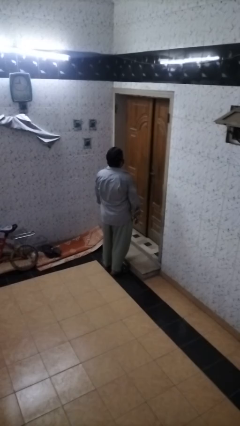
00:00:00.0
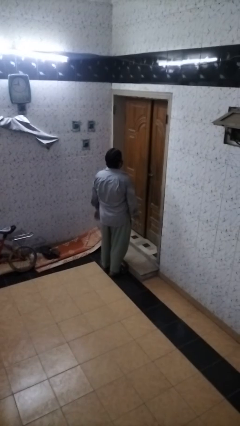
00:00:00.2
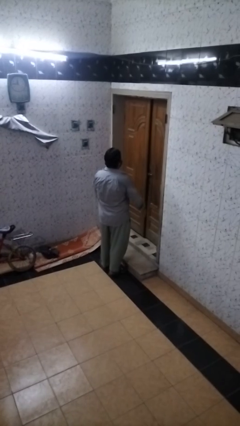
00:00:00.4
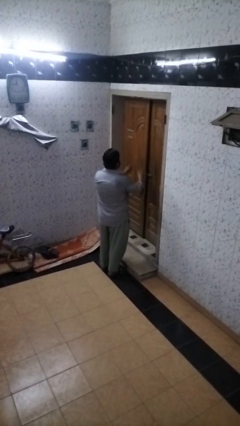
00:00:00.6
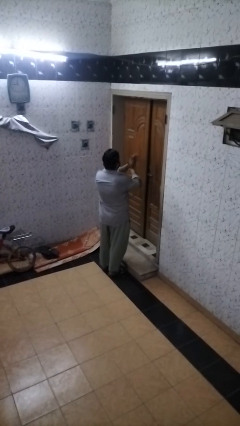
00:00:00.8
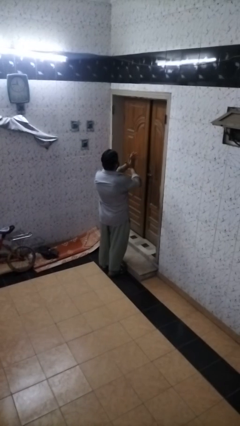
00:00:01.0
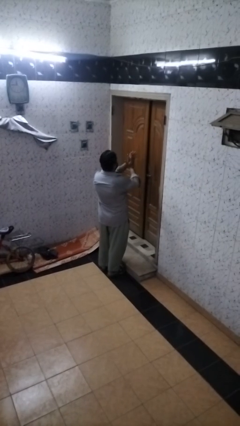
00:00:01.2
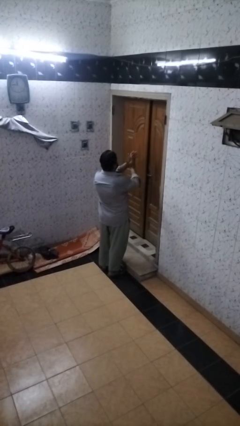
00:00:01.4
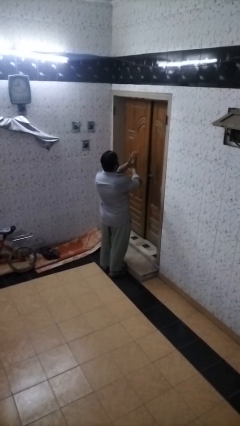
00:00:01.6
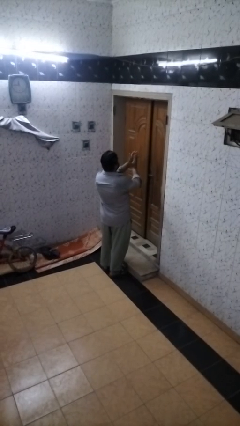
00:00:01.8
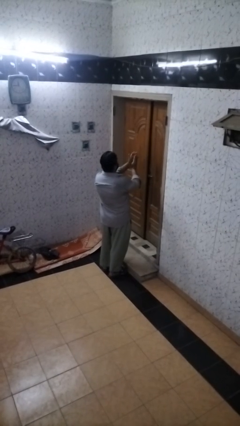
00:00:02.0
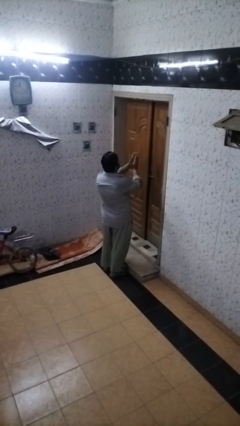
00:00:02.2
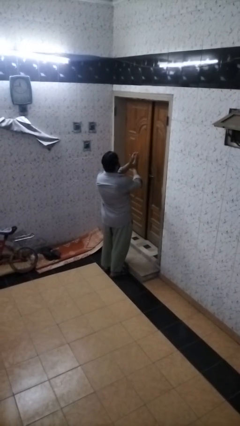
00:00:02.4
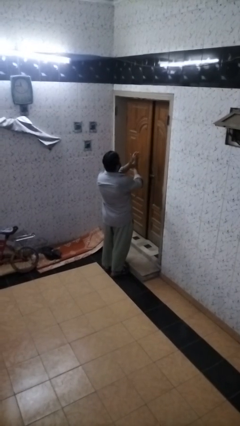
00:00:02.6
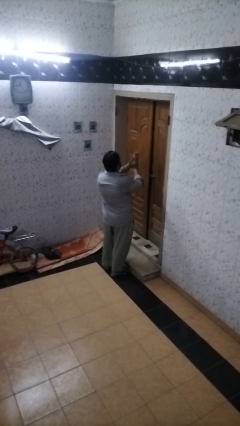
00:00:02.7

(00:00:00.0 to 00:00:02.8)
person claps hands

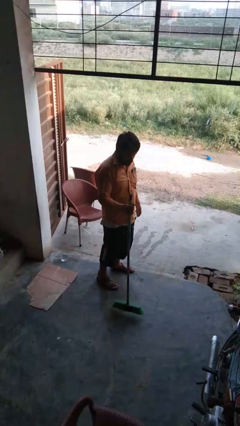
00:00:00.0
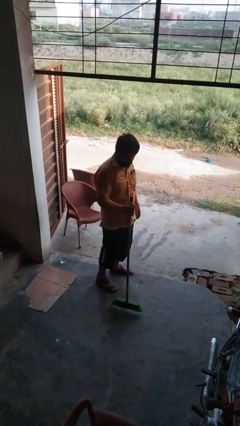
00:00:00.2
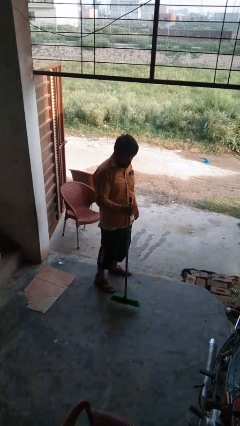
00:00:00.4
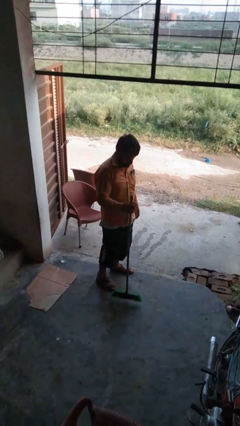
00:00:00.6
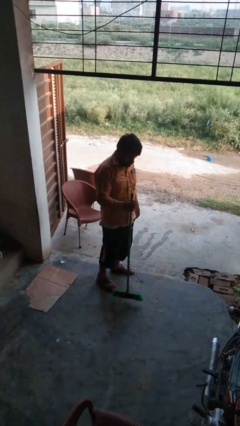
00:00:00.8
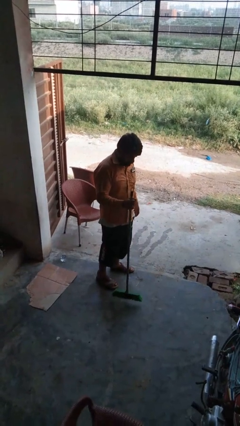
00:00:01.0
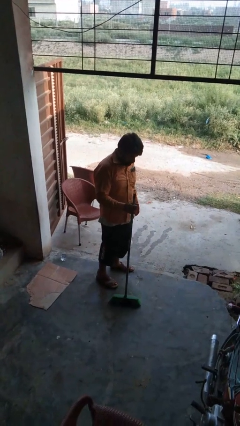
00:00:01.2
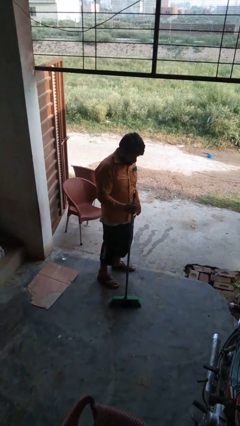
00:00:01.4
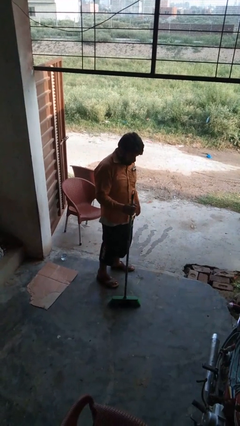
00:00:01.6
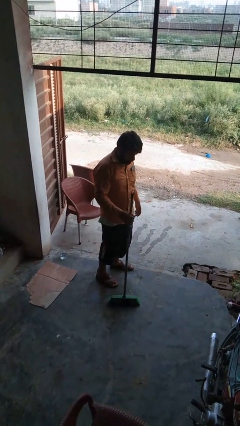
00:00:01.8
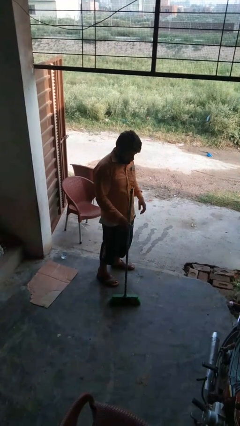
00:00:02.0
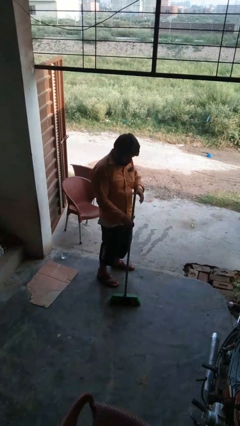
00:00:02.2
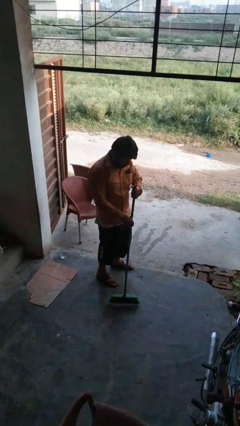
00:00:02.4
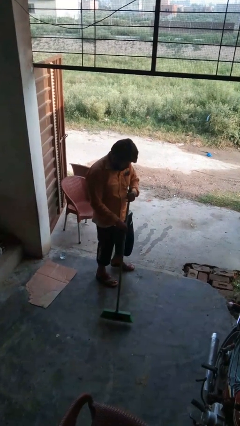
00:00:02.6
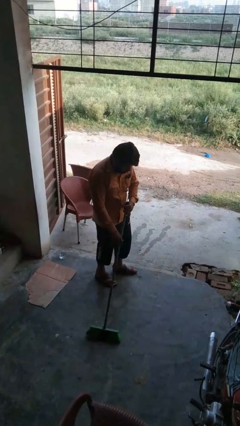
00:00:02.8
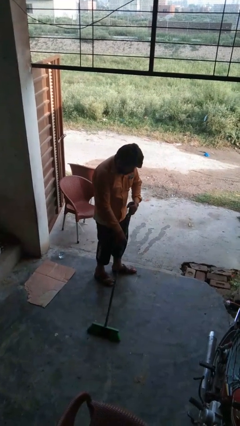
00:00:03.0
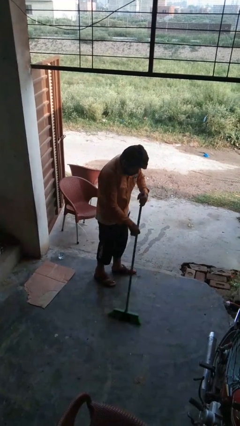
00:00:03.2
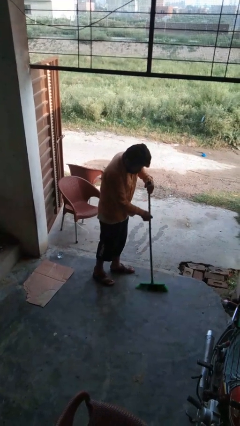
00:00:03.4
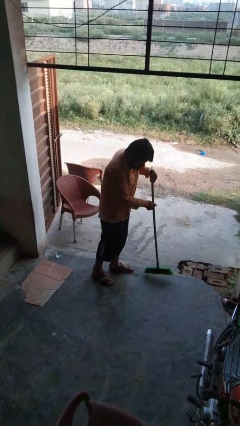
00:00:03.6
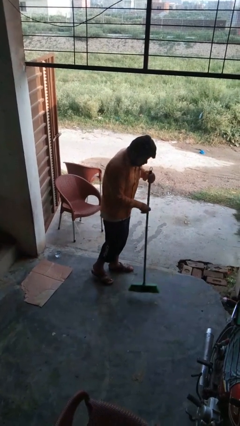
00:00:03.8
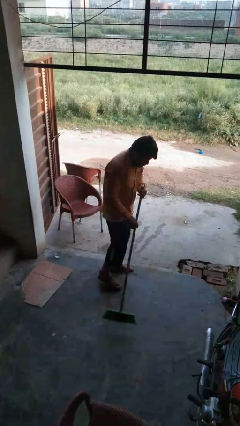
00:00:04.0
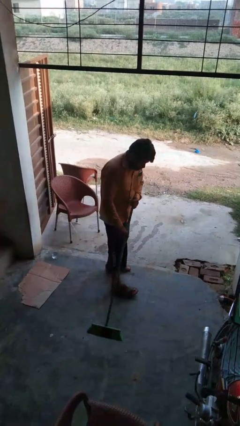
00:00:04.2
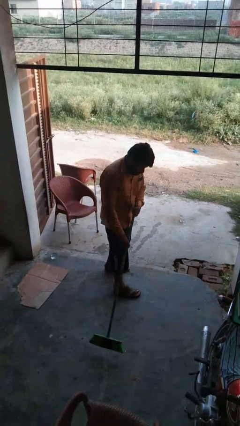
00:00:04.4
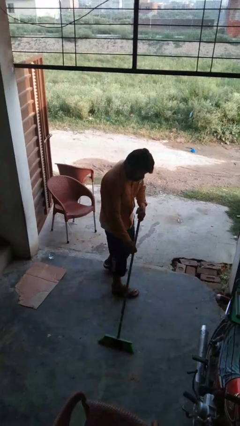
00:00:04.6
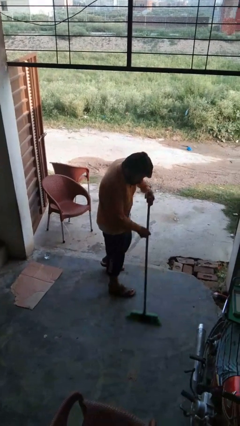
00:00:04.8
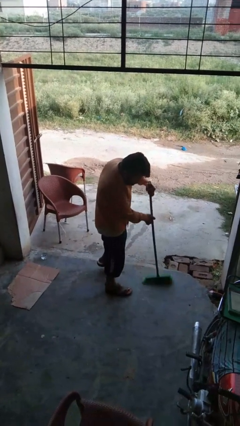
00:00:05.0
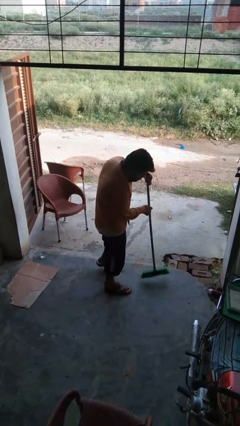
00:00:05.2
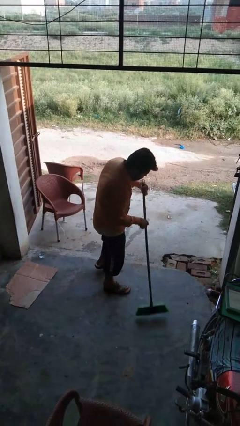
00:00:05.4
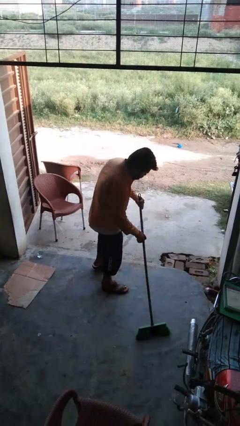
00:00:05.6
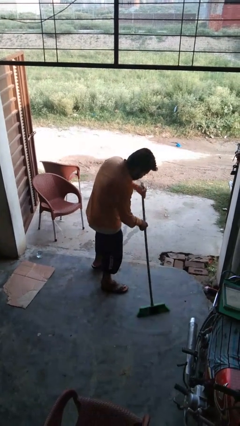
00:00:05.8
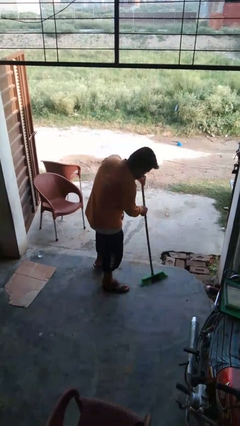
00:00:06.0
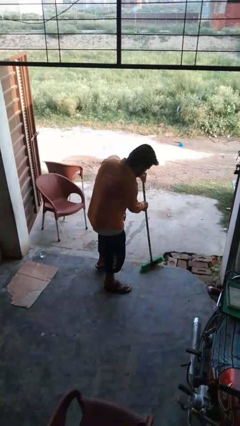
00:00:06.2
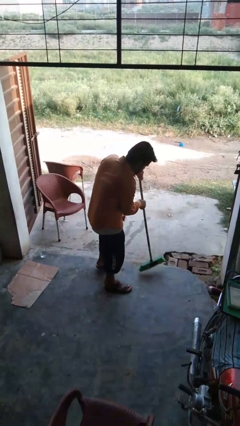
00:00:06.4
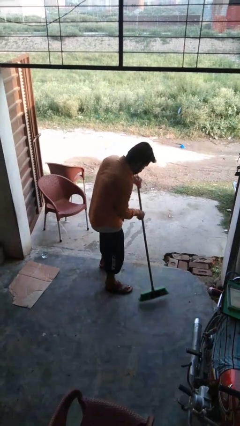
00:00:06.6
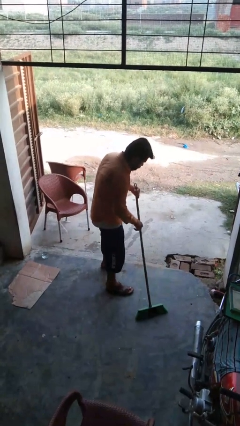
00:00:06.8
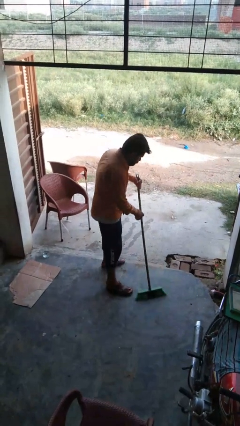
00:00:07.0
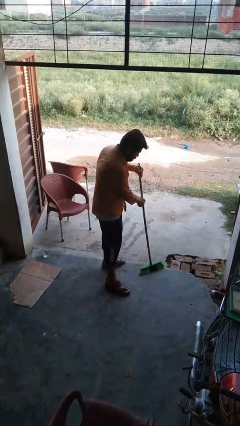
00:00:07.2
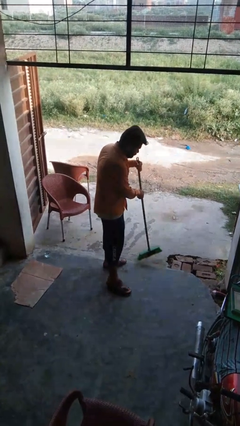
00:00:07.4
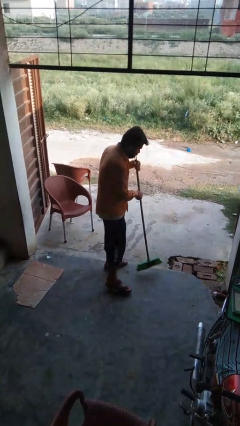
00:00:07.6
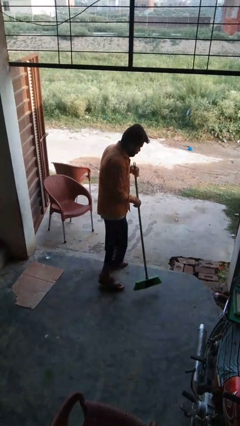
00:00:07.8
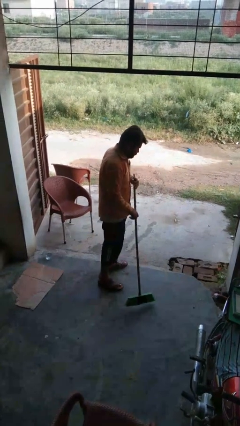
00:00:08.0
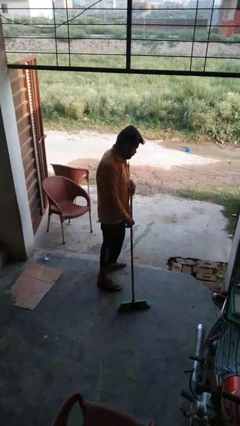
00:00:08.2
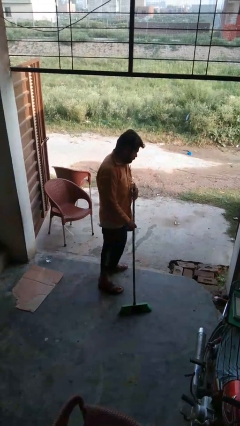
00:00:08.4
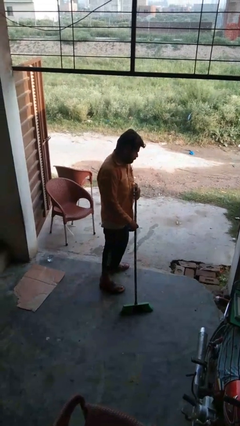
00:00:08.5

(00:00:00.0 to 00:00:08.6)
person mops

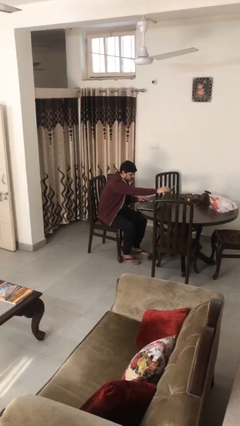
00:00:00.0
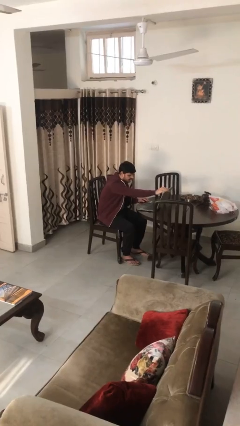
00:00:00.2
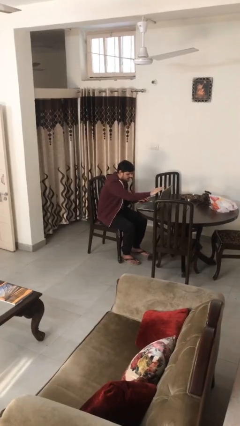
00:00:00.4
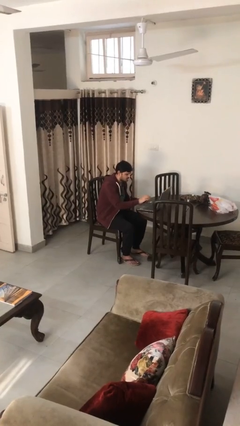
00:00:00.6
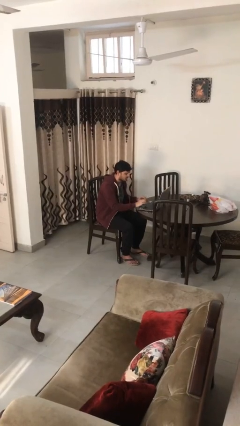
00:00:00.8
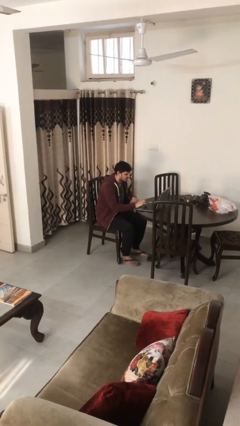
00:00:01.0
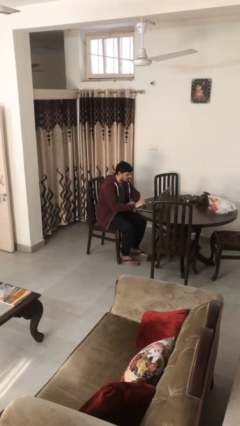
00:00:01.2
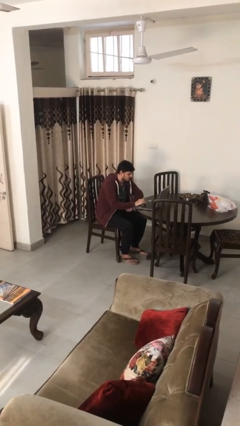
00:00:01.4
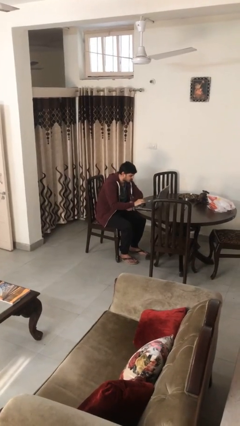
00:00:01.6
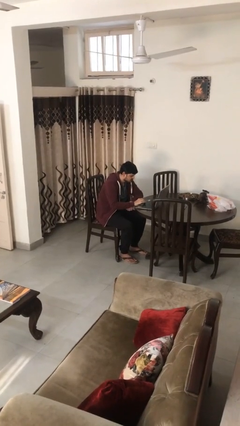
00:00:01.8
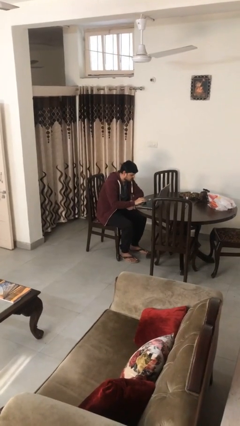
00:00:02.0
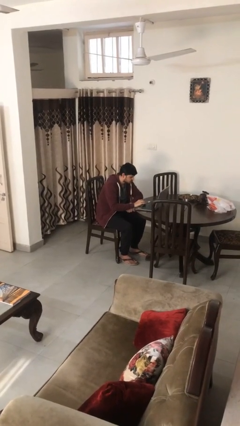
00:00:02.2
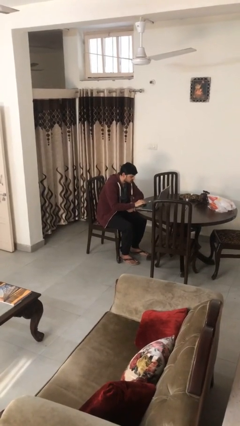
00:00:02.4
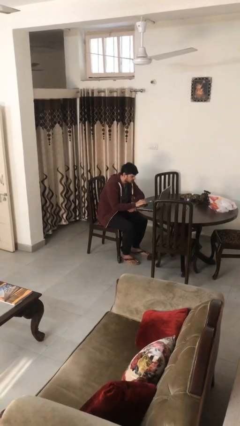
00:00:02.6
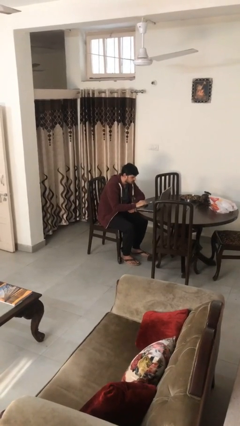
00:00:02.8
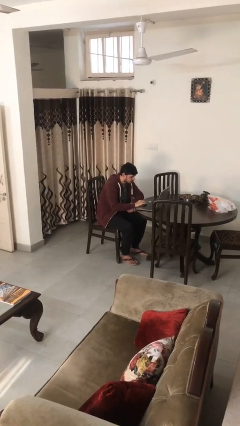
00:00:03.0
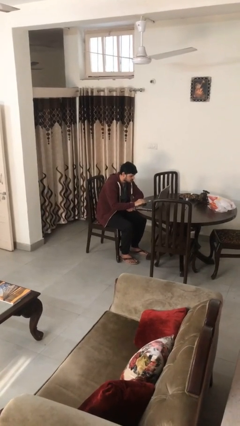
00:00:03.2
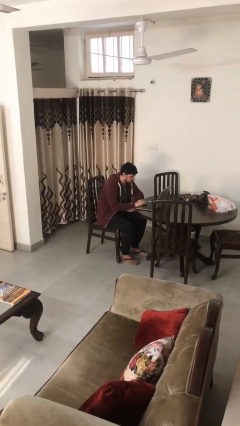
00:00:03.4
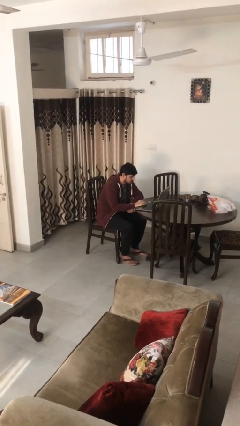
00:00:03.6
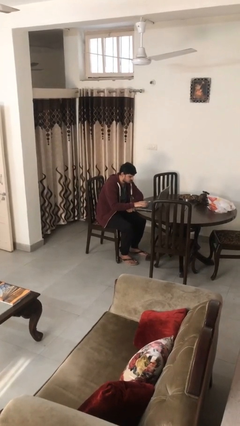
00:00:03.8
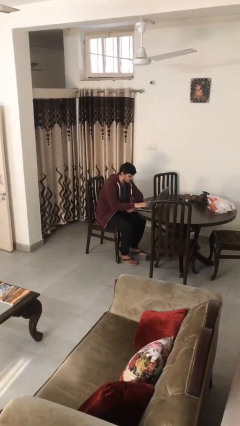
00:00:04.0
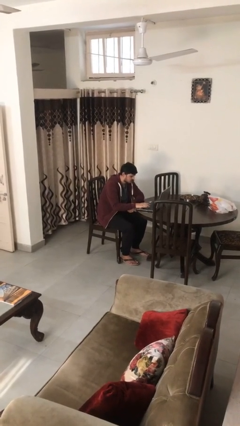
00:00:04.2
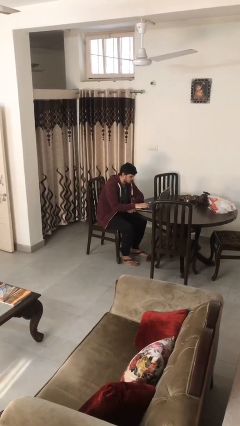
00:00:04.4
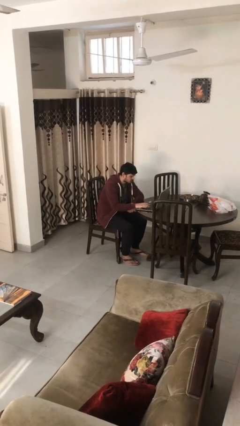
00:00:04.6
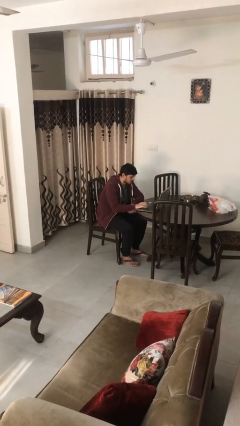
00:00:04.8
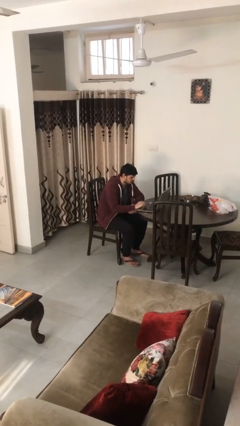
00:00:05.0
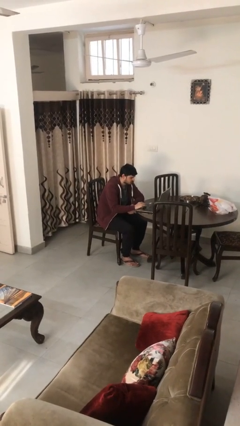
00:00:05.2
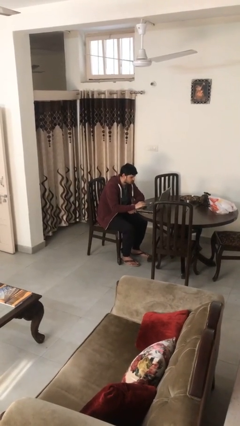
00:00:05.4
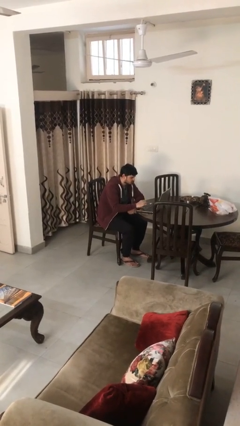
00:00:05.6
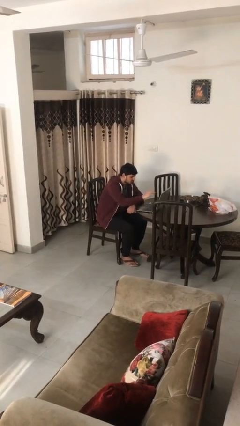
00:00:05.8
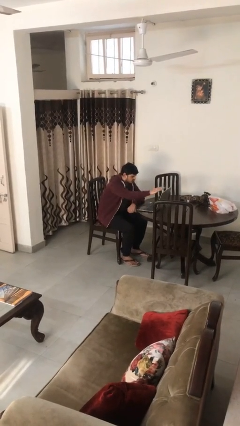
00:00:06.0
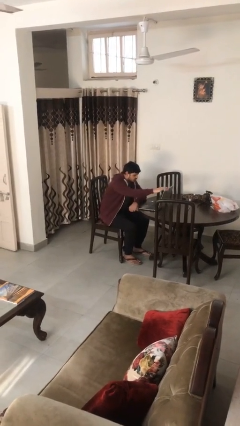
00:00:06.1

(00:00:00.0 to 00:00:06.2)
person interacts with laptop

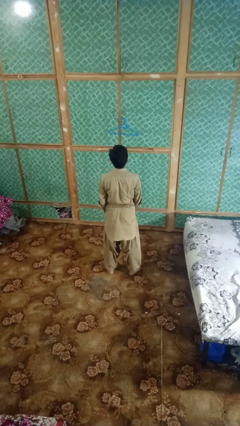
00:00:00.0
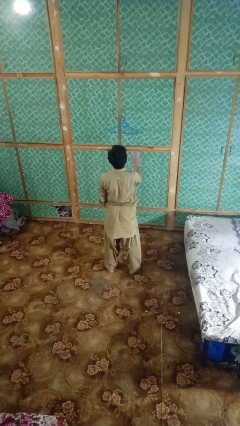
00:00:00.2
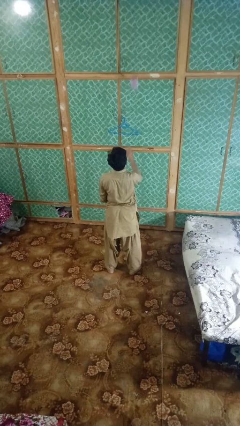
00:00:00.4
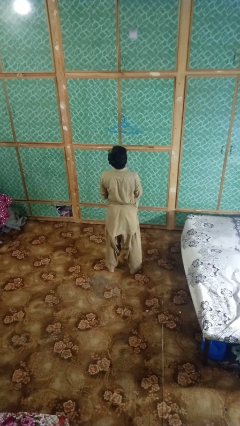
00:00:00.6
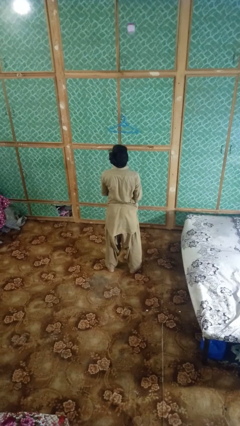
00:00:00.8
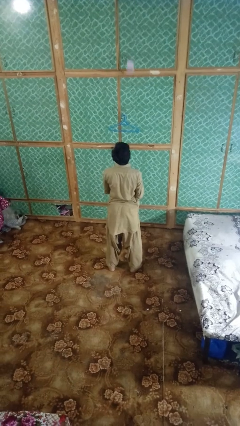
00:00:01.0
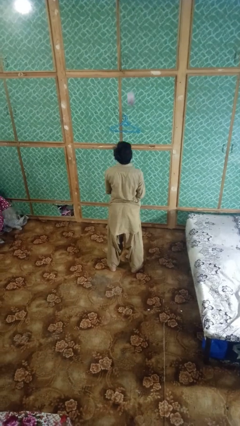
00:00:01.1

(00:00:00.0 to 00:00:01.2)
person drops object
